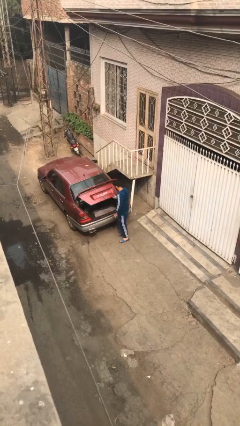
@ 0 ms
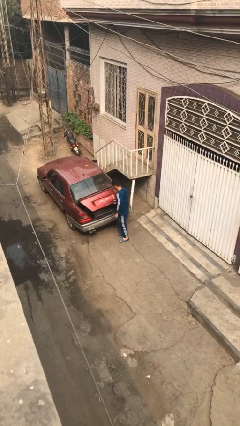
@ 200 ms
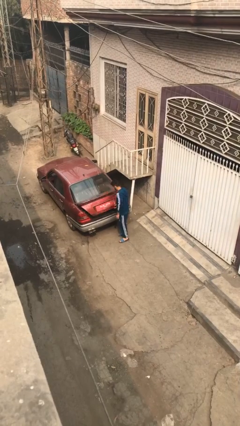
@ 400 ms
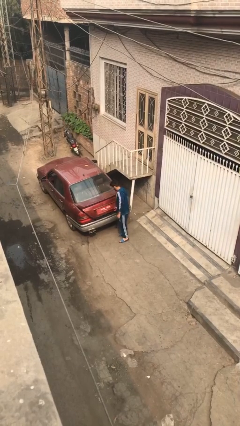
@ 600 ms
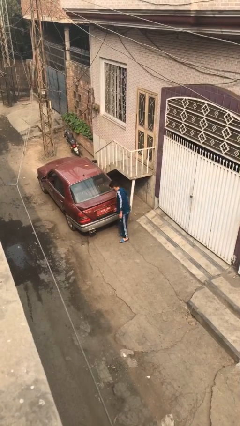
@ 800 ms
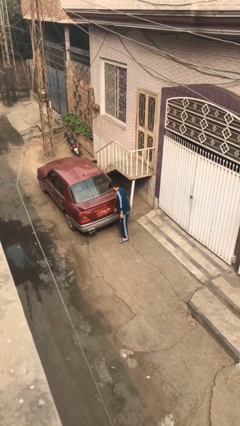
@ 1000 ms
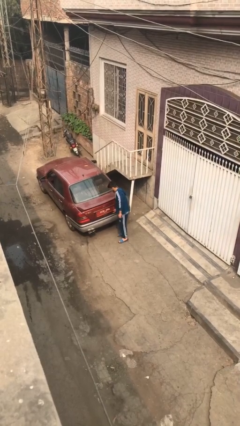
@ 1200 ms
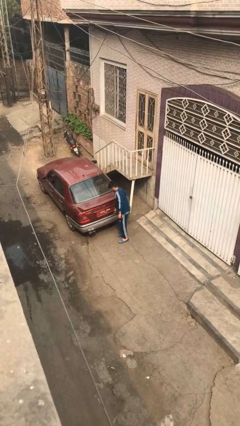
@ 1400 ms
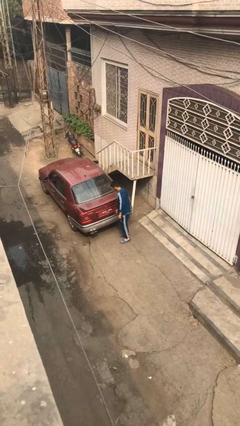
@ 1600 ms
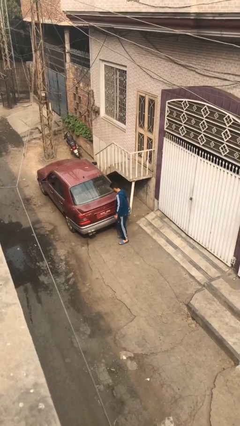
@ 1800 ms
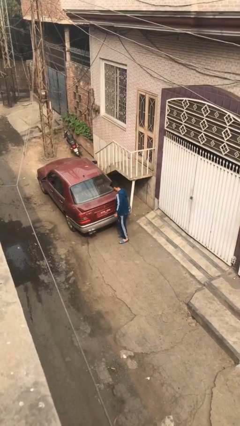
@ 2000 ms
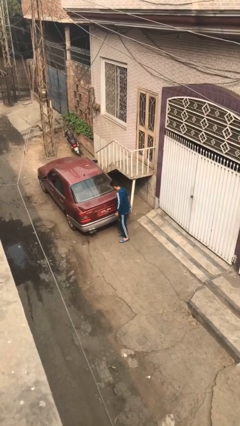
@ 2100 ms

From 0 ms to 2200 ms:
person closes car trunk

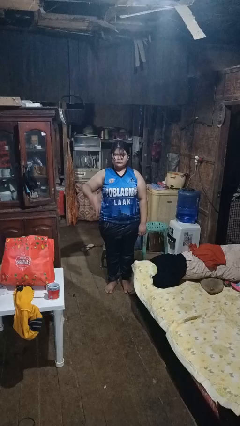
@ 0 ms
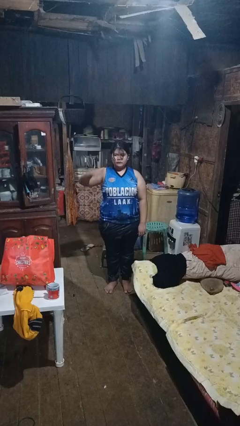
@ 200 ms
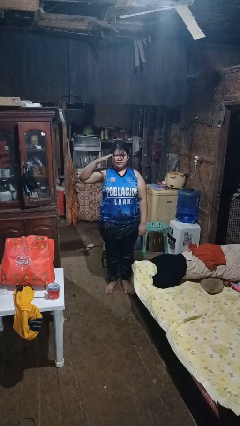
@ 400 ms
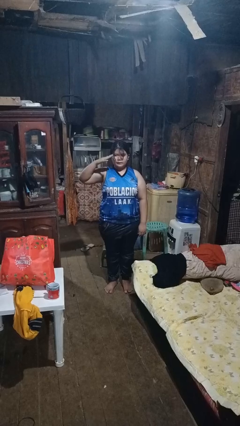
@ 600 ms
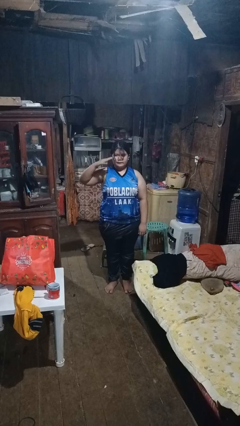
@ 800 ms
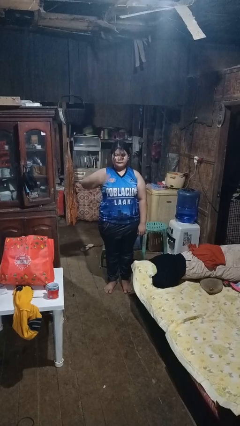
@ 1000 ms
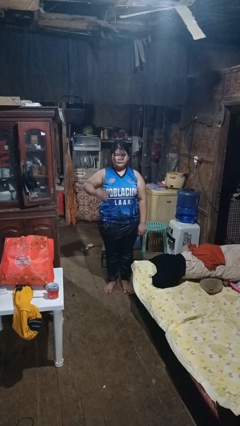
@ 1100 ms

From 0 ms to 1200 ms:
person salutes

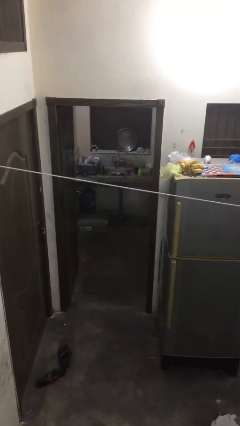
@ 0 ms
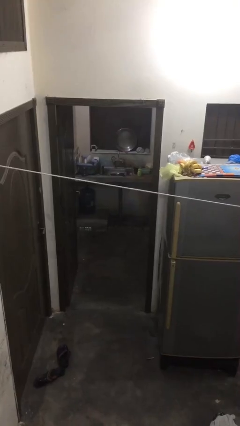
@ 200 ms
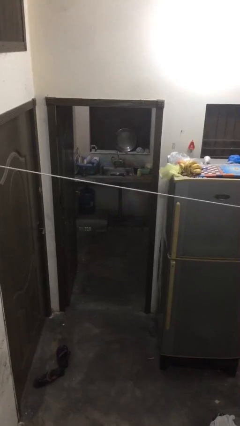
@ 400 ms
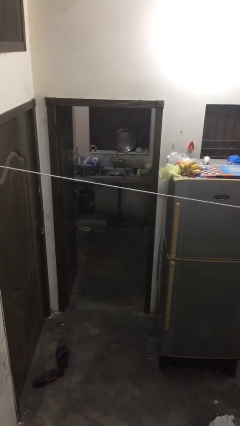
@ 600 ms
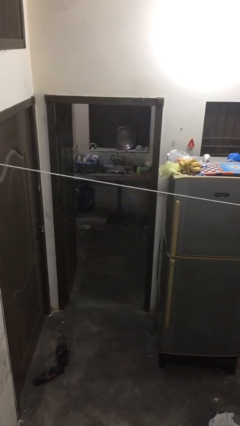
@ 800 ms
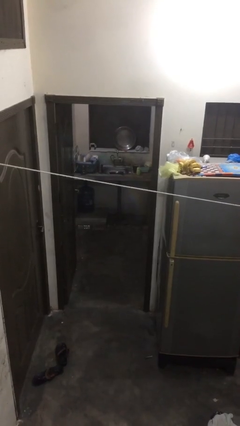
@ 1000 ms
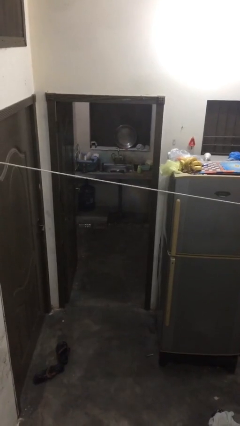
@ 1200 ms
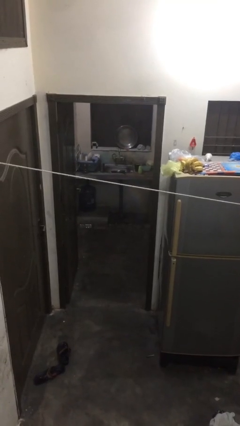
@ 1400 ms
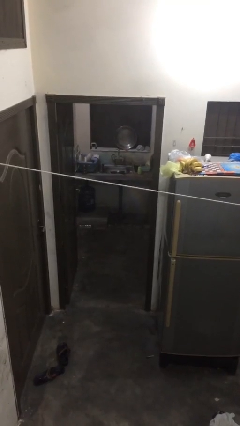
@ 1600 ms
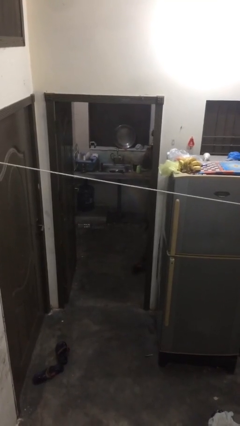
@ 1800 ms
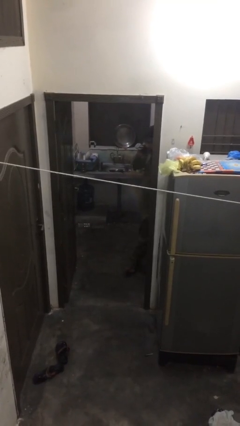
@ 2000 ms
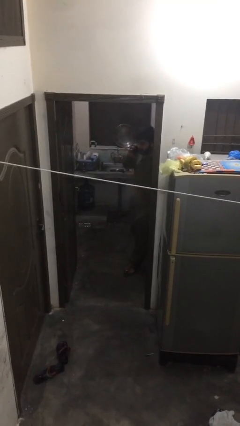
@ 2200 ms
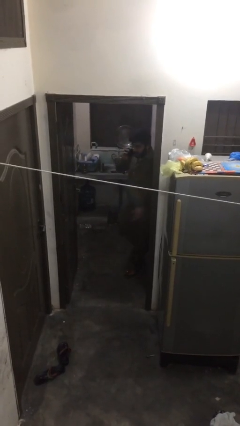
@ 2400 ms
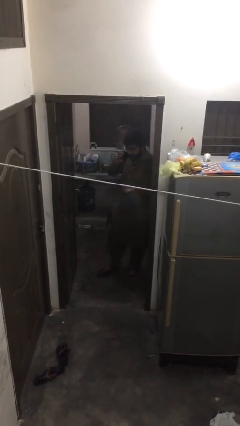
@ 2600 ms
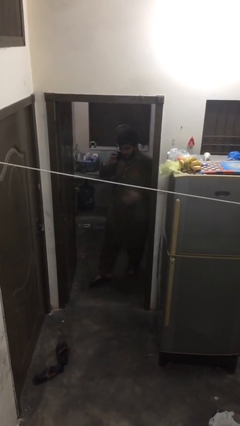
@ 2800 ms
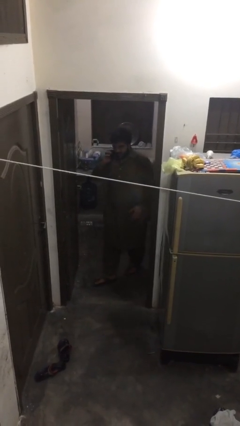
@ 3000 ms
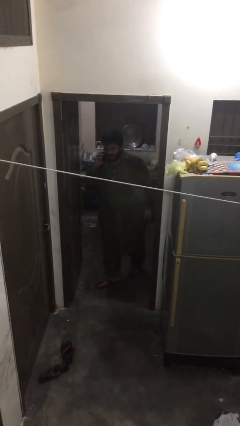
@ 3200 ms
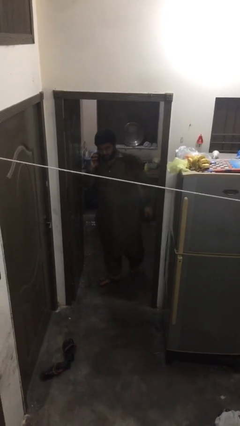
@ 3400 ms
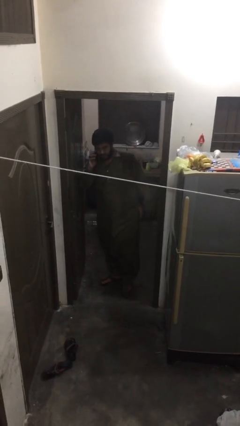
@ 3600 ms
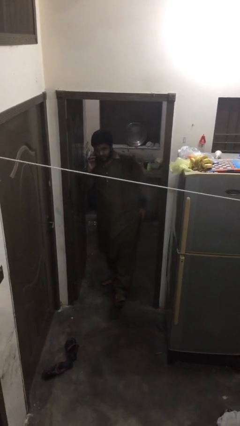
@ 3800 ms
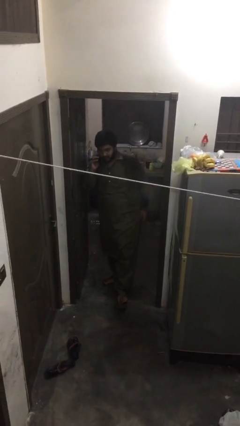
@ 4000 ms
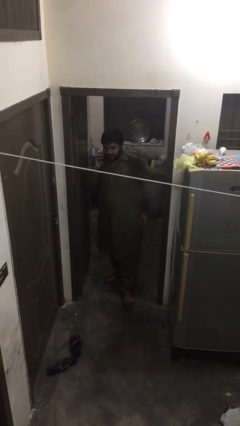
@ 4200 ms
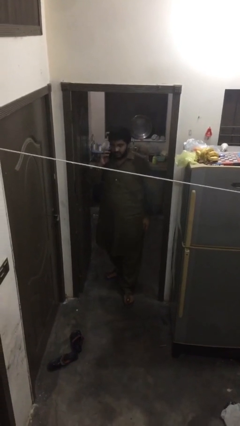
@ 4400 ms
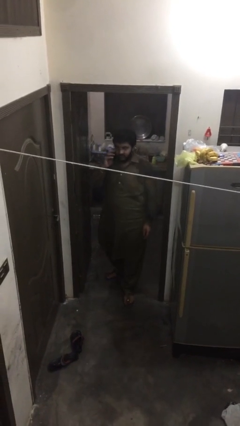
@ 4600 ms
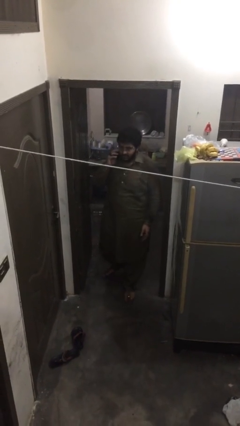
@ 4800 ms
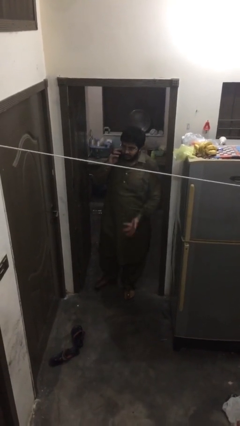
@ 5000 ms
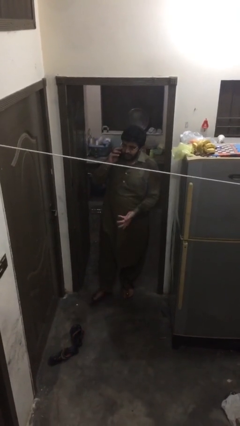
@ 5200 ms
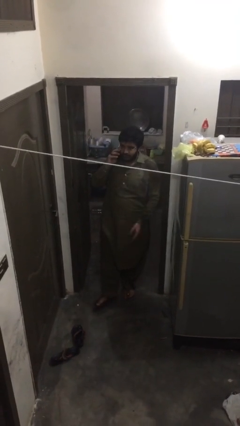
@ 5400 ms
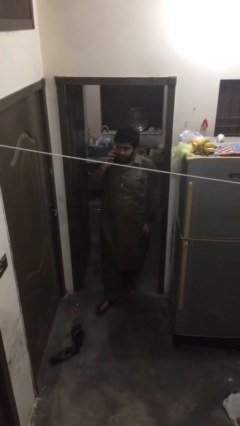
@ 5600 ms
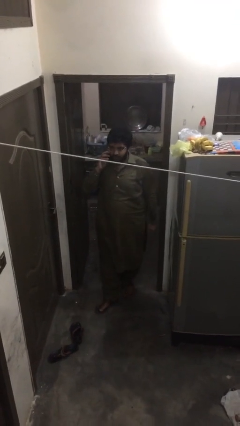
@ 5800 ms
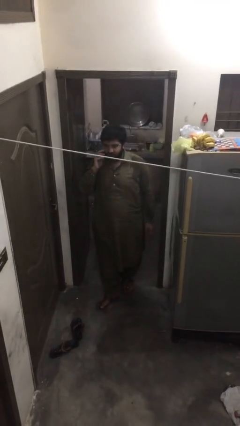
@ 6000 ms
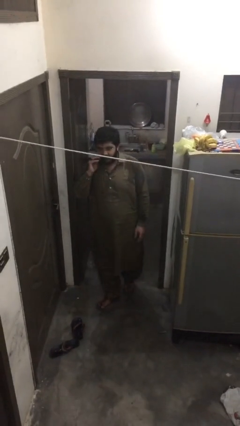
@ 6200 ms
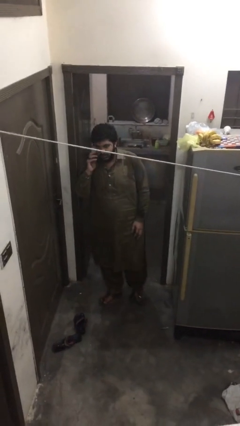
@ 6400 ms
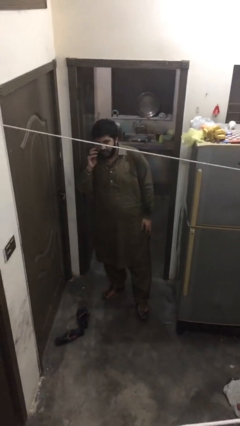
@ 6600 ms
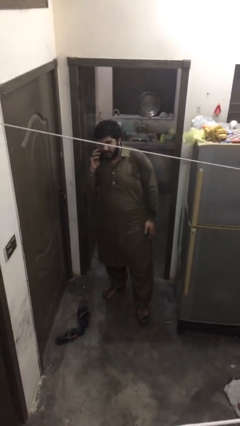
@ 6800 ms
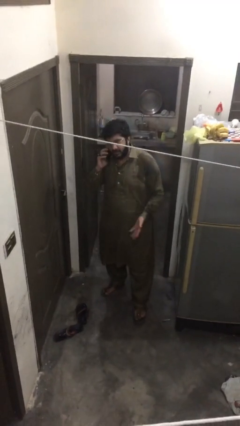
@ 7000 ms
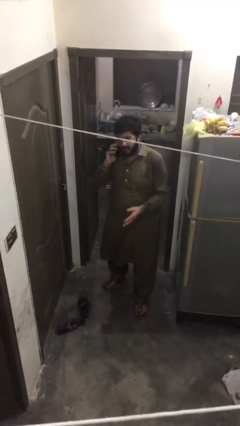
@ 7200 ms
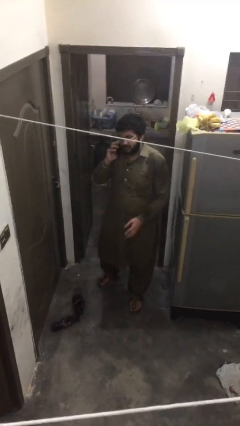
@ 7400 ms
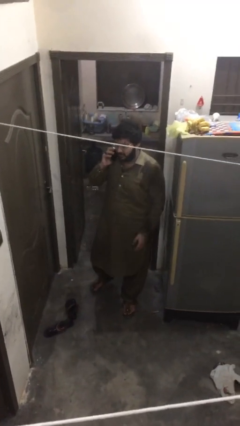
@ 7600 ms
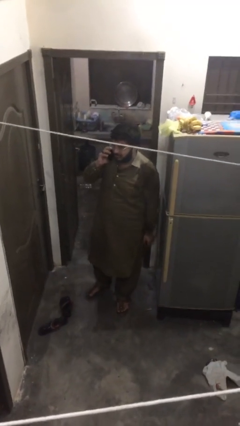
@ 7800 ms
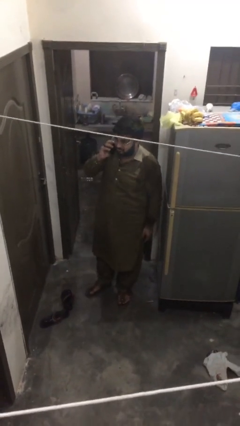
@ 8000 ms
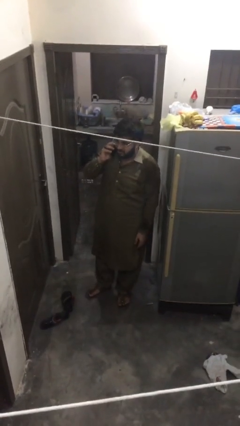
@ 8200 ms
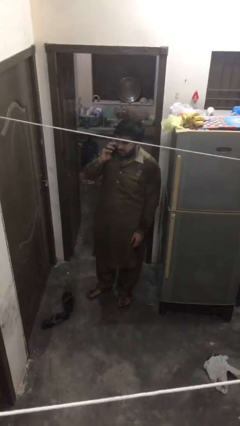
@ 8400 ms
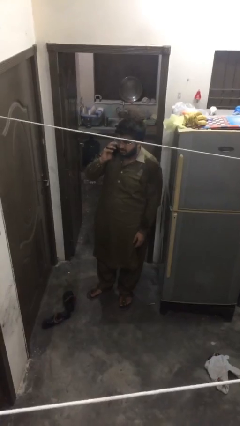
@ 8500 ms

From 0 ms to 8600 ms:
person enters scene through structure

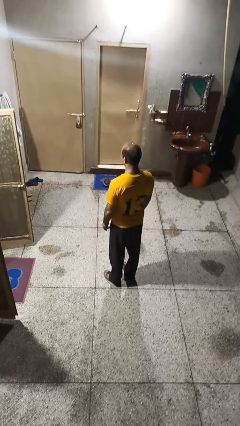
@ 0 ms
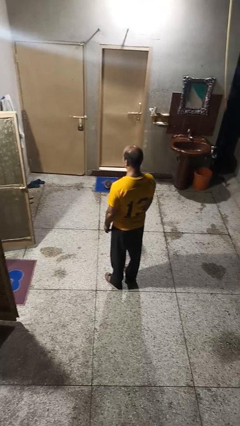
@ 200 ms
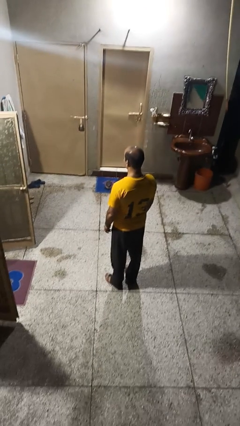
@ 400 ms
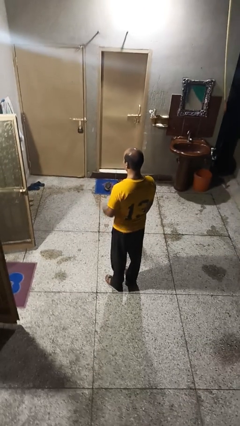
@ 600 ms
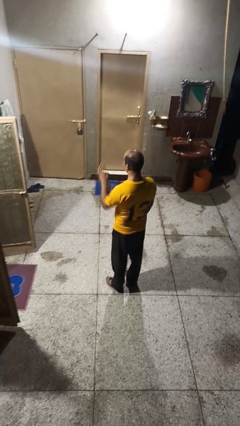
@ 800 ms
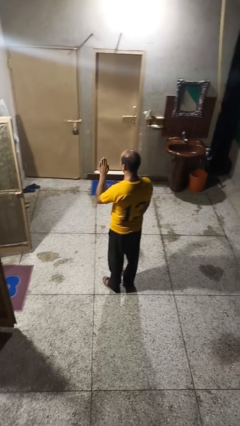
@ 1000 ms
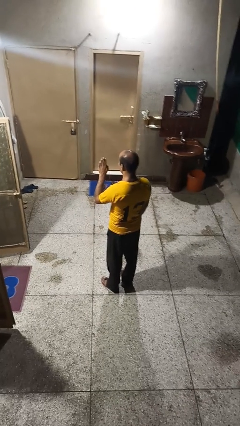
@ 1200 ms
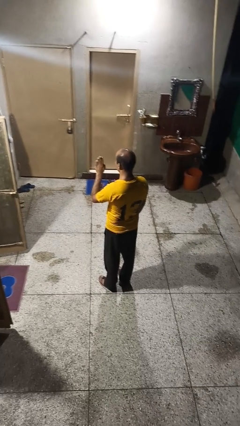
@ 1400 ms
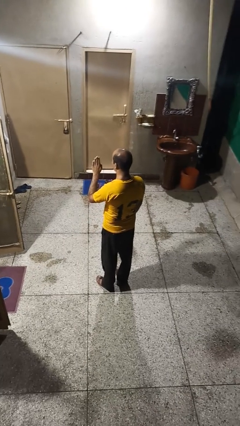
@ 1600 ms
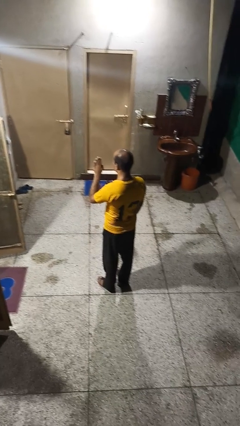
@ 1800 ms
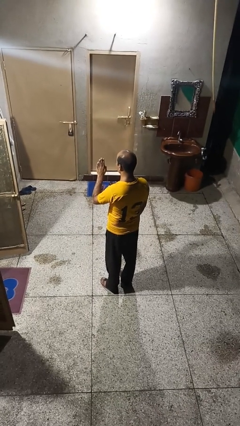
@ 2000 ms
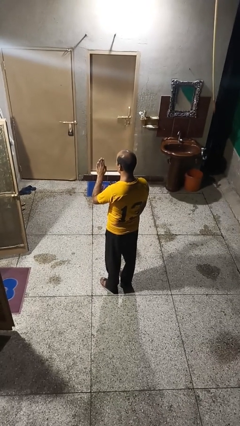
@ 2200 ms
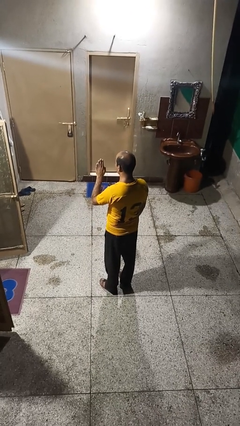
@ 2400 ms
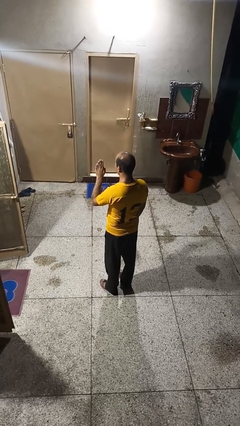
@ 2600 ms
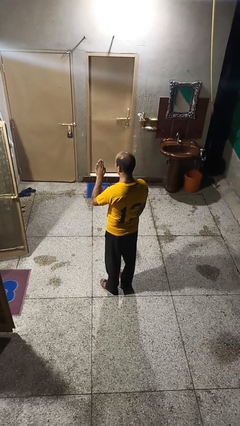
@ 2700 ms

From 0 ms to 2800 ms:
person gestures stop

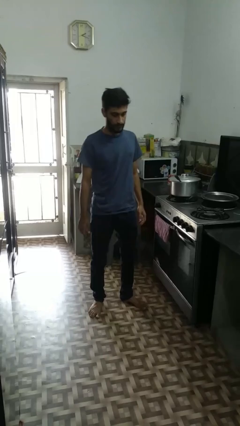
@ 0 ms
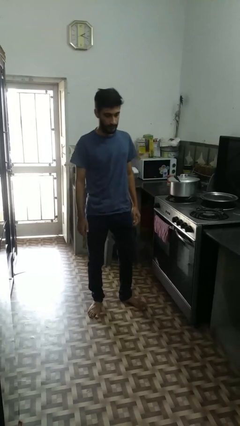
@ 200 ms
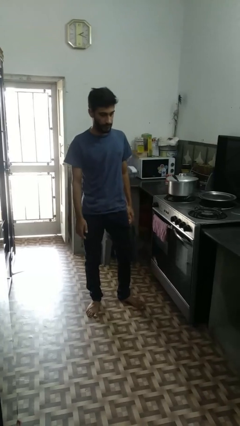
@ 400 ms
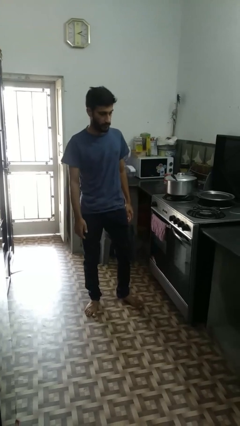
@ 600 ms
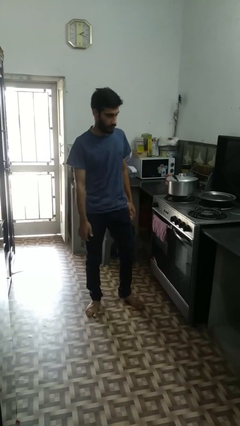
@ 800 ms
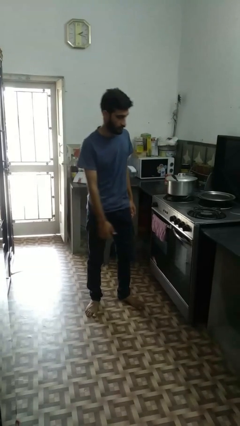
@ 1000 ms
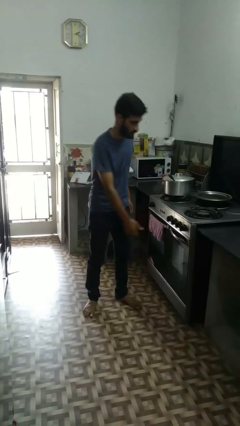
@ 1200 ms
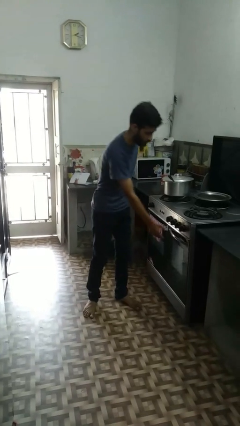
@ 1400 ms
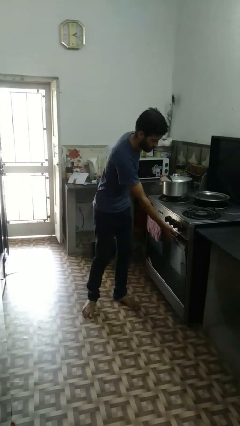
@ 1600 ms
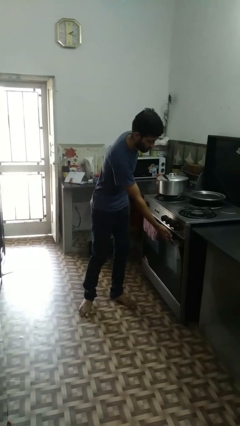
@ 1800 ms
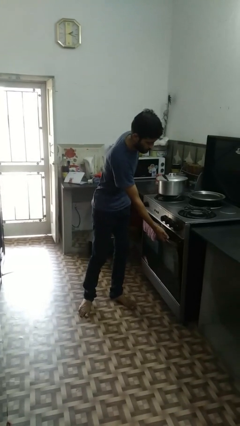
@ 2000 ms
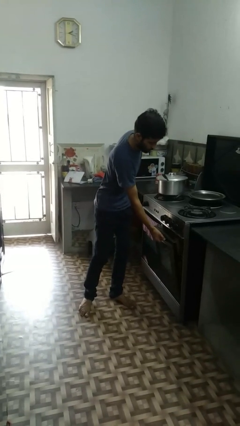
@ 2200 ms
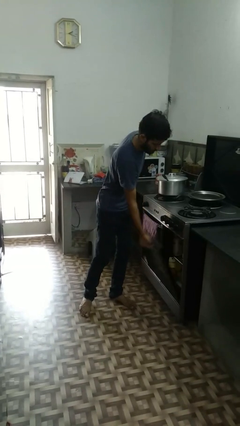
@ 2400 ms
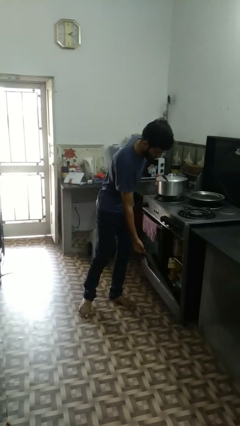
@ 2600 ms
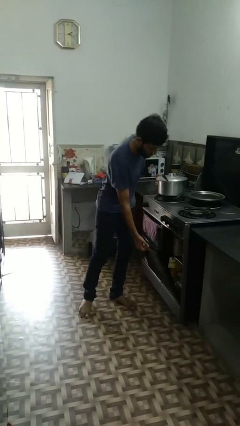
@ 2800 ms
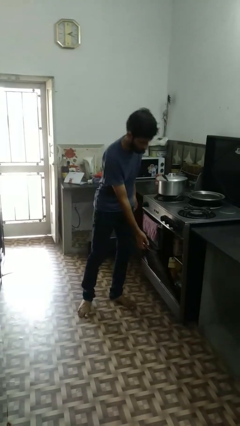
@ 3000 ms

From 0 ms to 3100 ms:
person opens dishwasher
